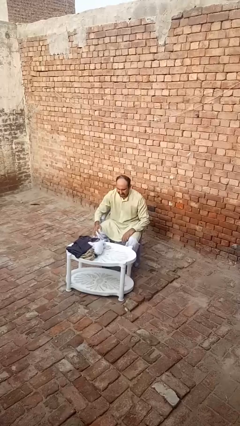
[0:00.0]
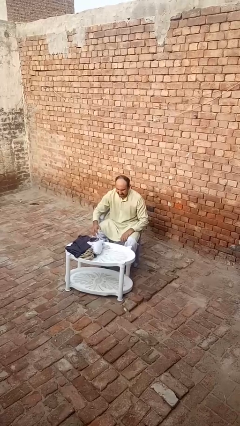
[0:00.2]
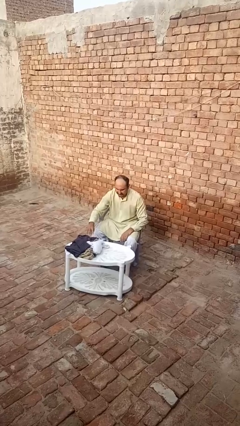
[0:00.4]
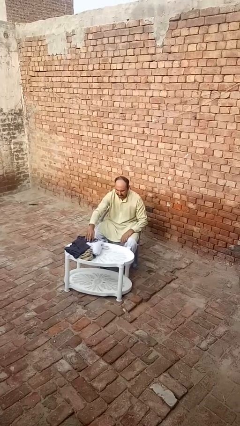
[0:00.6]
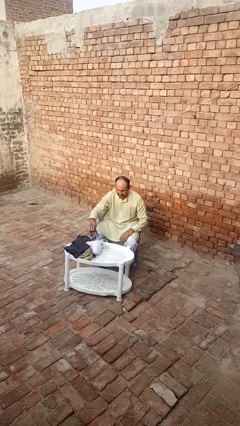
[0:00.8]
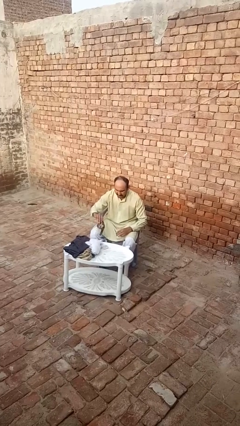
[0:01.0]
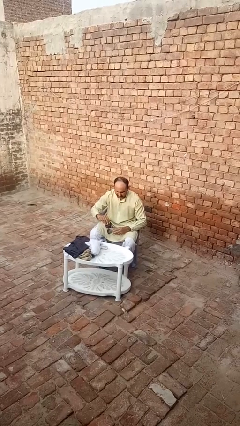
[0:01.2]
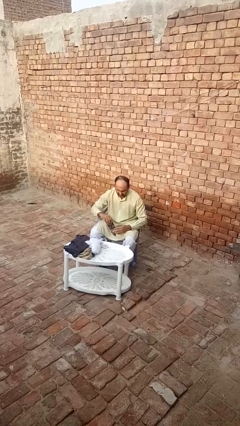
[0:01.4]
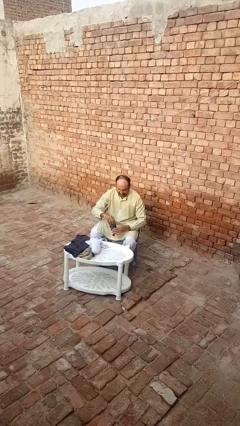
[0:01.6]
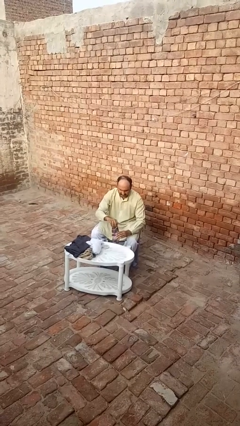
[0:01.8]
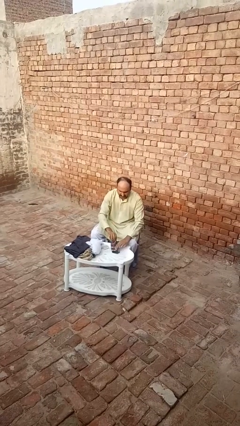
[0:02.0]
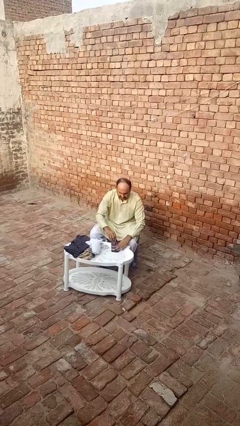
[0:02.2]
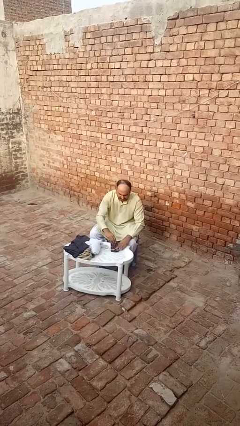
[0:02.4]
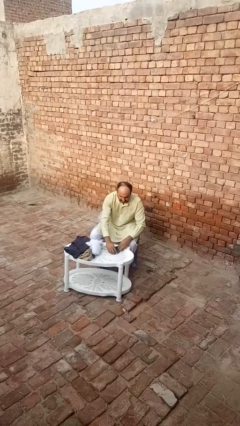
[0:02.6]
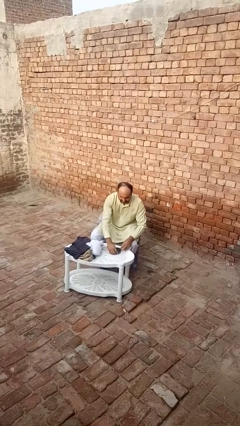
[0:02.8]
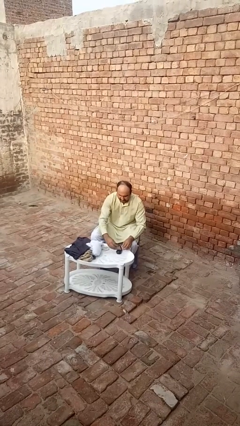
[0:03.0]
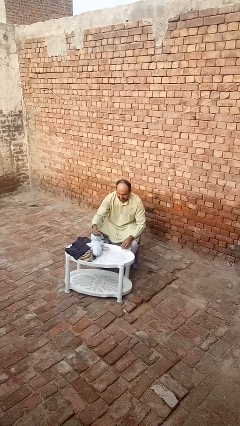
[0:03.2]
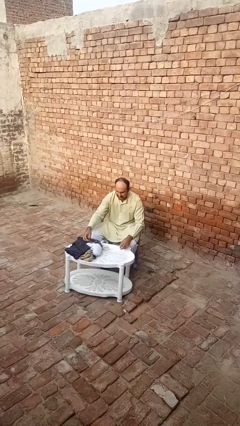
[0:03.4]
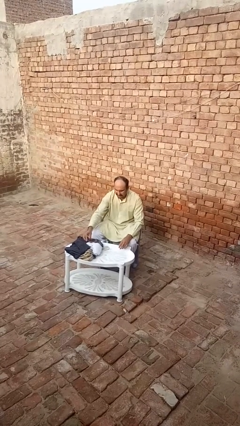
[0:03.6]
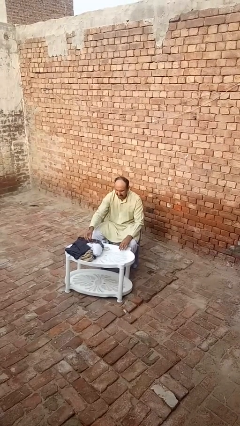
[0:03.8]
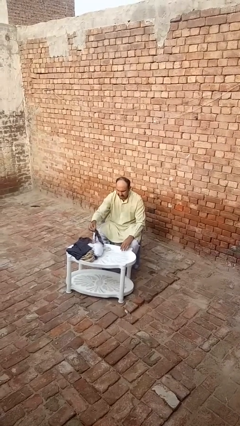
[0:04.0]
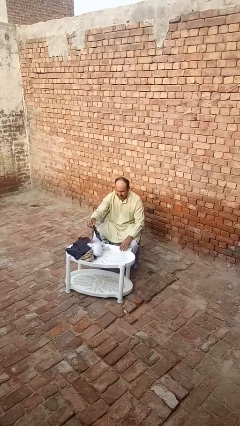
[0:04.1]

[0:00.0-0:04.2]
person folds socks

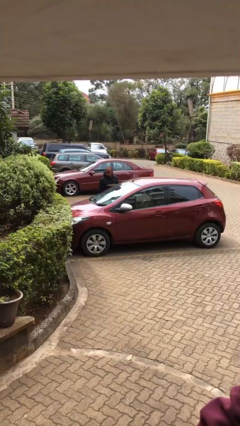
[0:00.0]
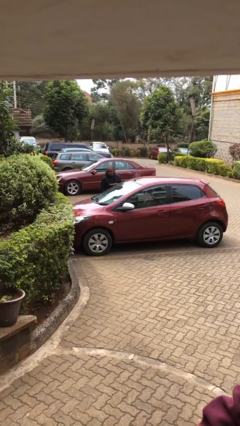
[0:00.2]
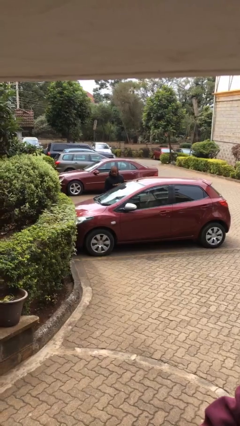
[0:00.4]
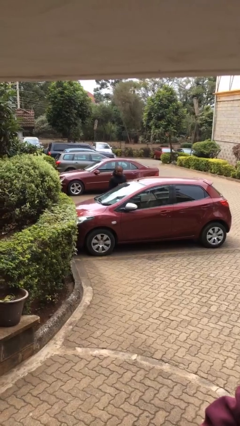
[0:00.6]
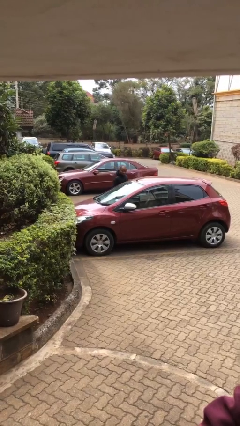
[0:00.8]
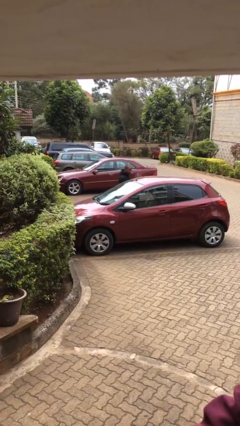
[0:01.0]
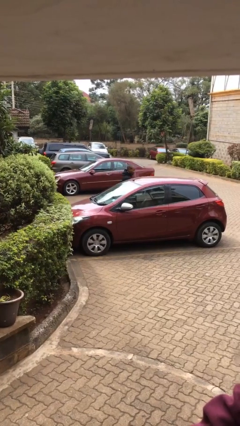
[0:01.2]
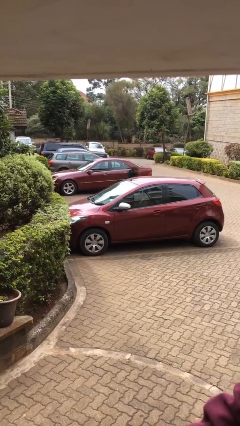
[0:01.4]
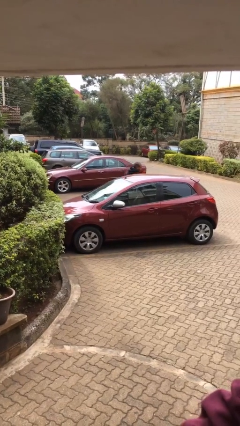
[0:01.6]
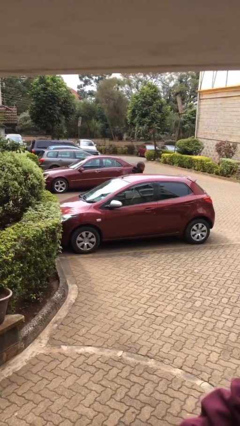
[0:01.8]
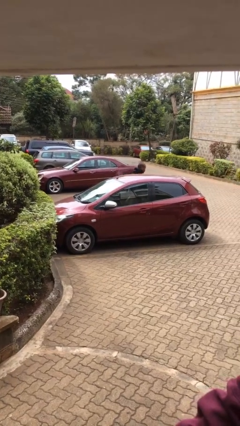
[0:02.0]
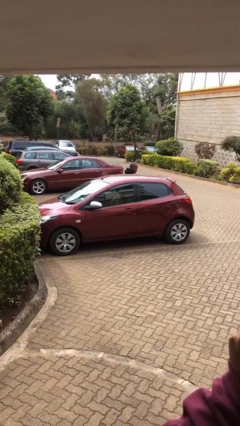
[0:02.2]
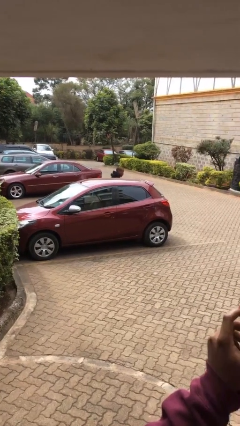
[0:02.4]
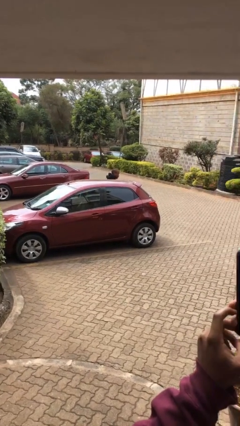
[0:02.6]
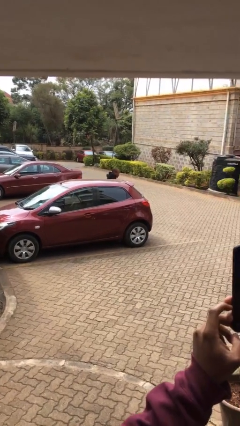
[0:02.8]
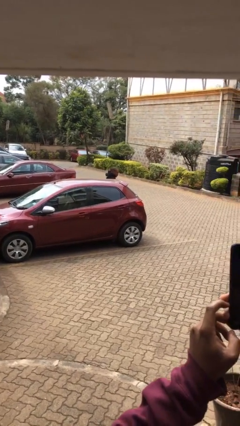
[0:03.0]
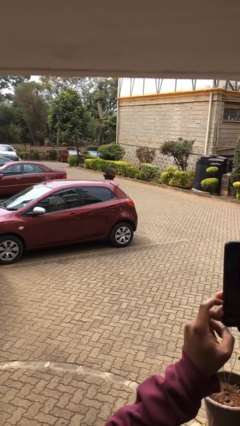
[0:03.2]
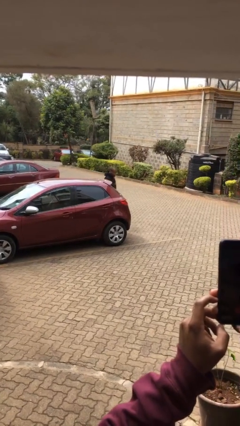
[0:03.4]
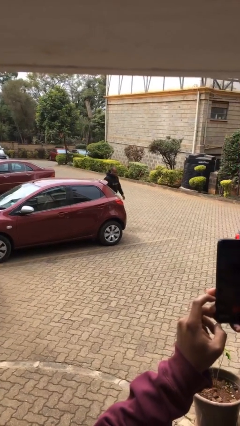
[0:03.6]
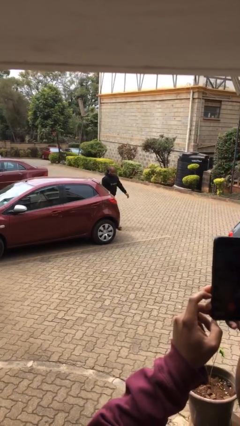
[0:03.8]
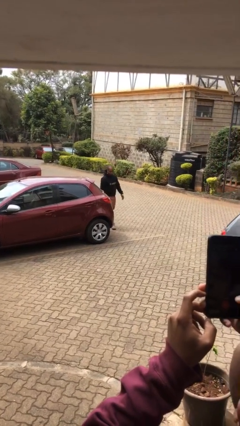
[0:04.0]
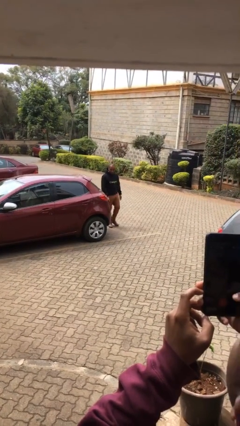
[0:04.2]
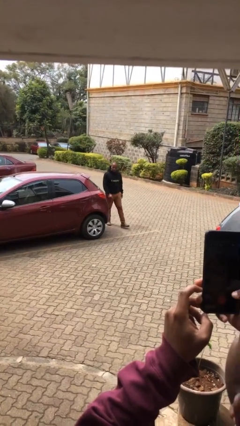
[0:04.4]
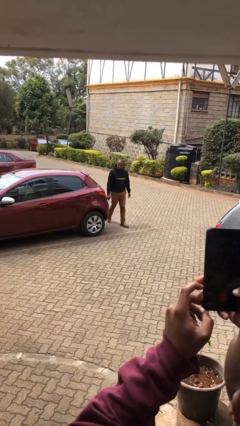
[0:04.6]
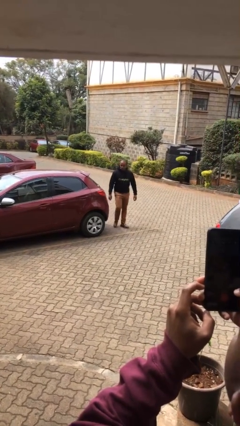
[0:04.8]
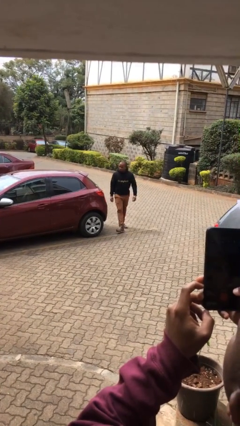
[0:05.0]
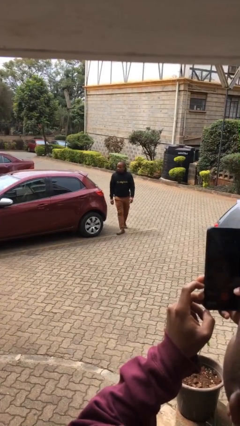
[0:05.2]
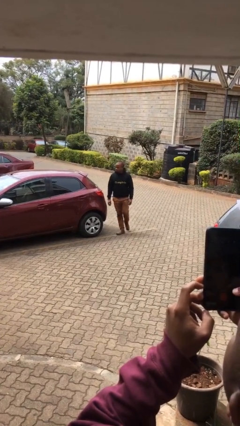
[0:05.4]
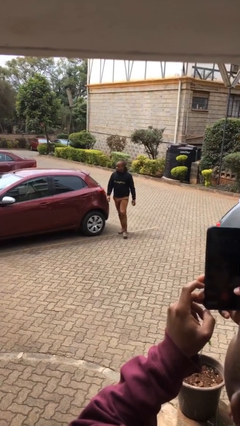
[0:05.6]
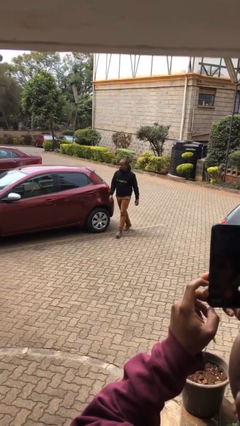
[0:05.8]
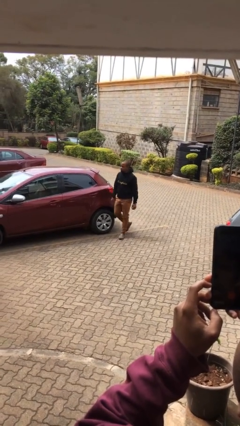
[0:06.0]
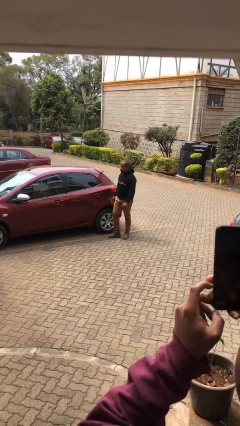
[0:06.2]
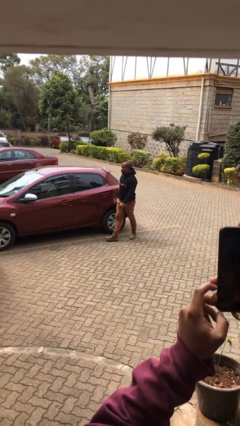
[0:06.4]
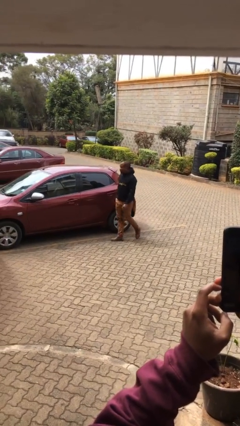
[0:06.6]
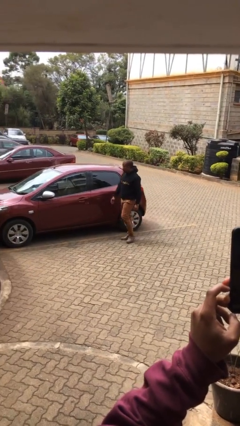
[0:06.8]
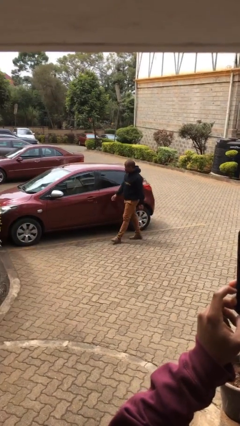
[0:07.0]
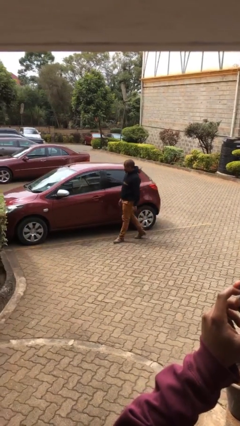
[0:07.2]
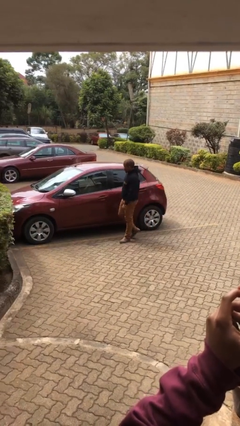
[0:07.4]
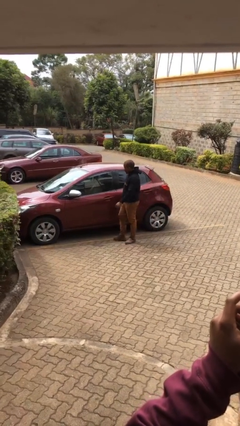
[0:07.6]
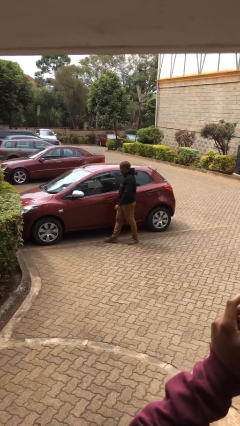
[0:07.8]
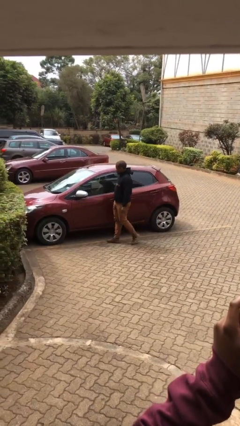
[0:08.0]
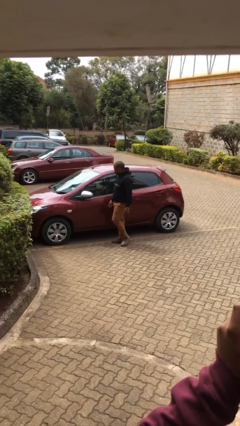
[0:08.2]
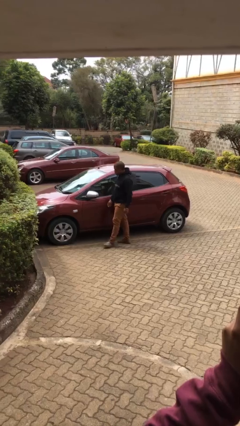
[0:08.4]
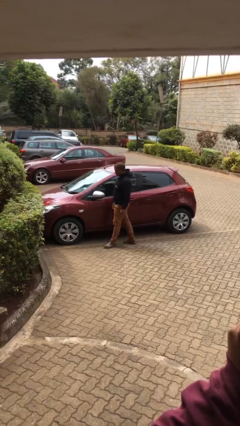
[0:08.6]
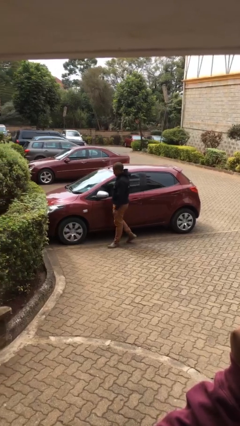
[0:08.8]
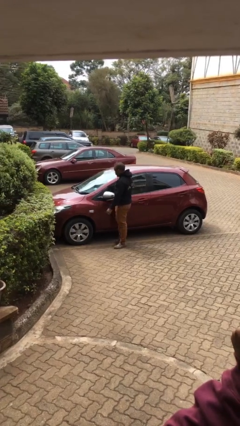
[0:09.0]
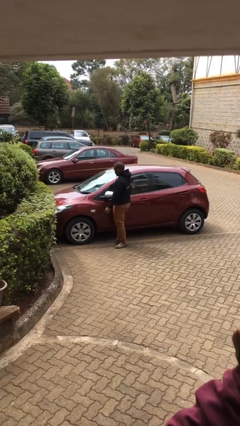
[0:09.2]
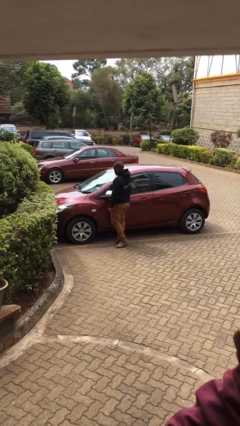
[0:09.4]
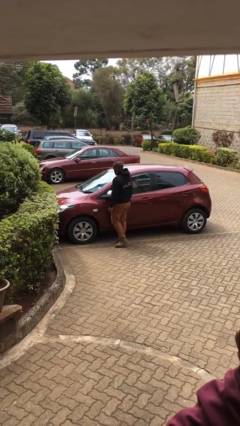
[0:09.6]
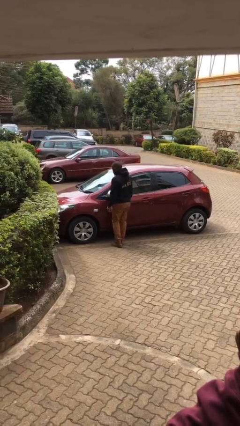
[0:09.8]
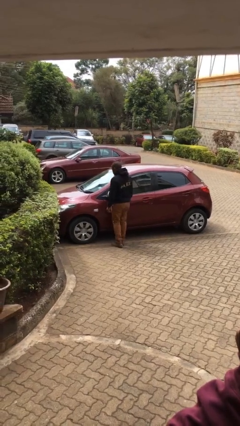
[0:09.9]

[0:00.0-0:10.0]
person walks around car

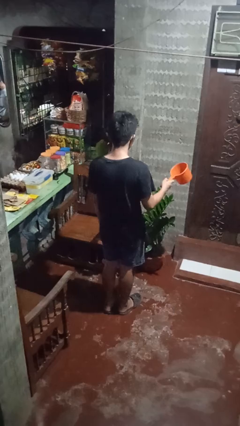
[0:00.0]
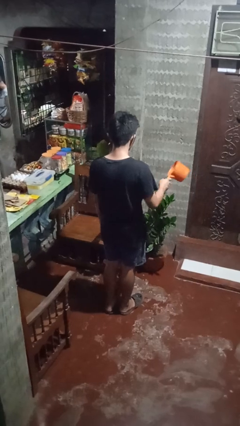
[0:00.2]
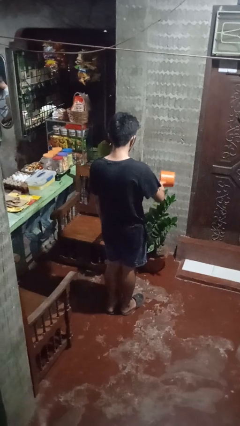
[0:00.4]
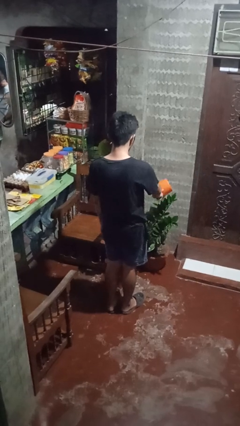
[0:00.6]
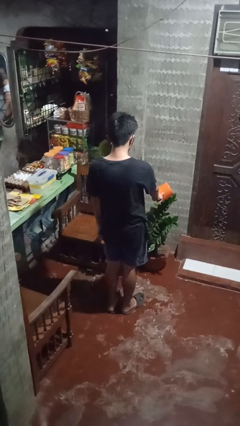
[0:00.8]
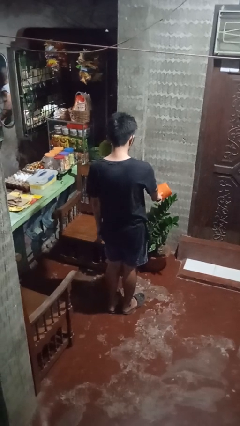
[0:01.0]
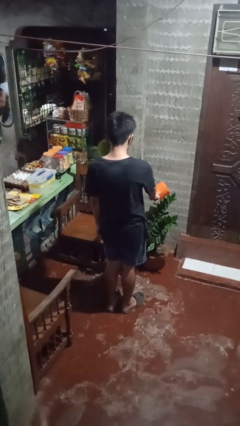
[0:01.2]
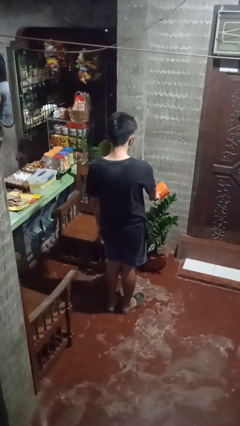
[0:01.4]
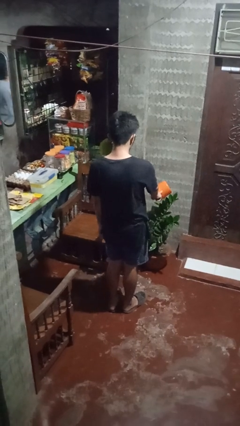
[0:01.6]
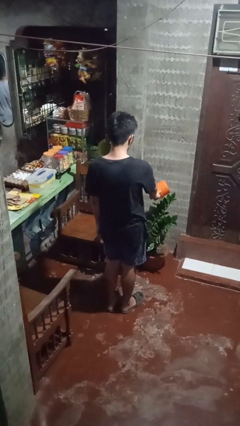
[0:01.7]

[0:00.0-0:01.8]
person waters houseplant

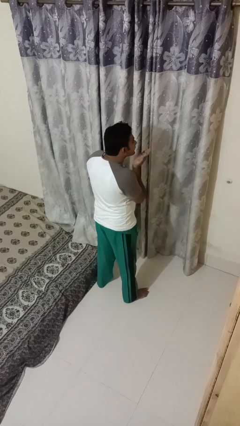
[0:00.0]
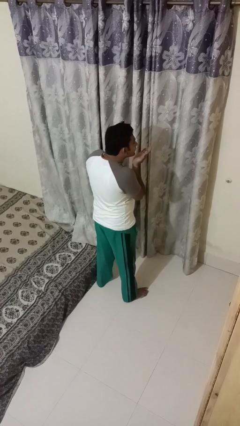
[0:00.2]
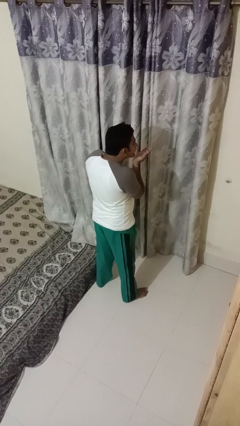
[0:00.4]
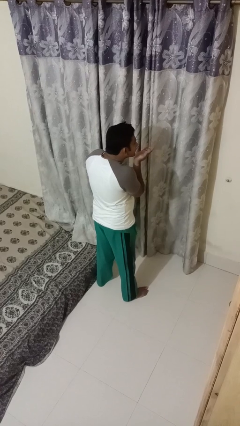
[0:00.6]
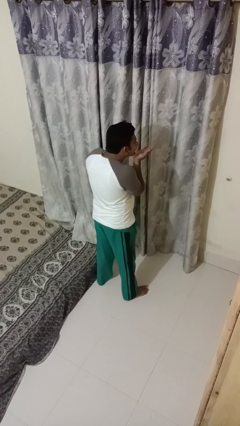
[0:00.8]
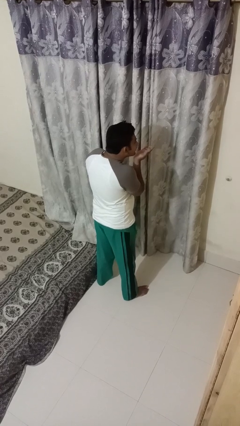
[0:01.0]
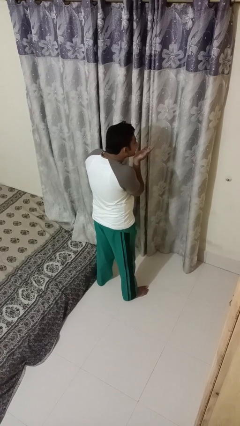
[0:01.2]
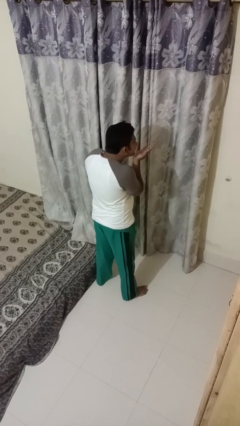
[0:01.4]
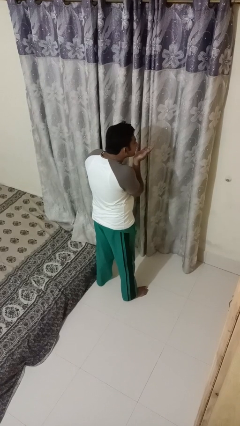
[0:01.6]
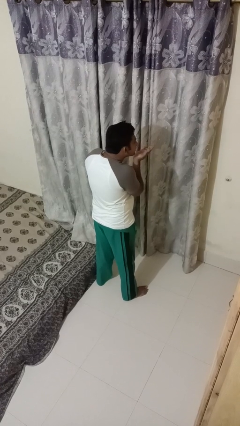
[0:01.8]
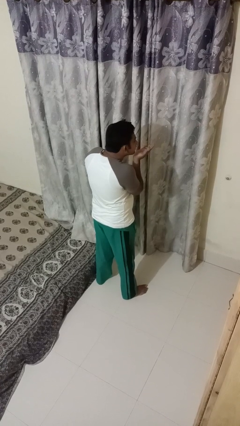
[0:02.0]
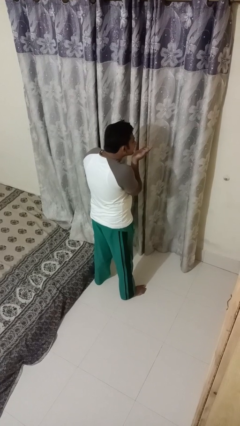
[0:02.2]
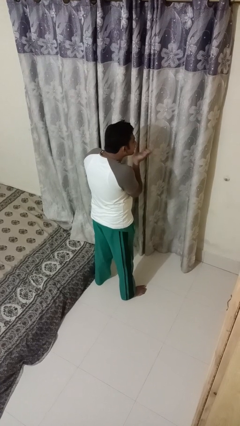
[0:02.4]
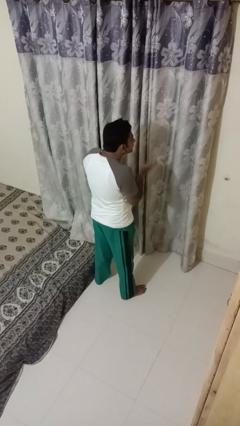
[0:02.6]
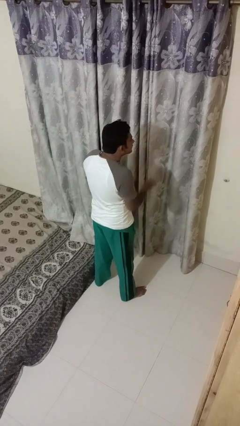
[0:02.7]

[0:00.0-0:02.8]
person gestures blow kiss
